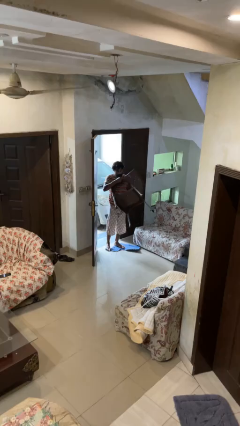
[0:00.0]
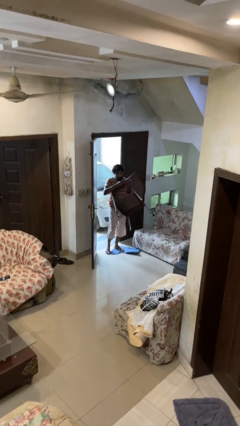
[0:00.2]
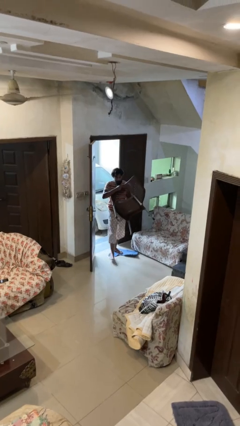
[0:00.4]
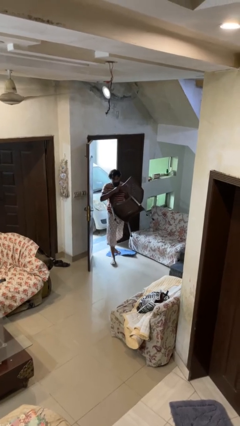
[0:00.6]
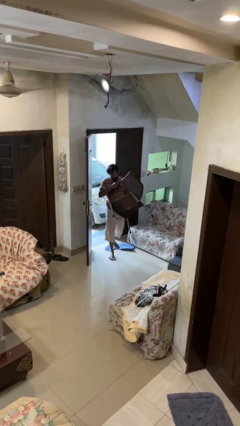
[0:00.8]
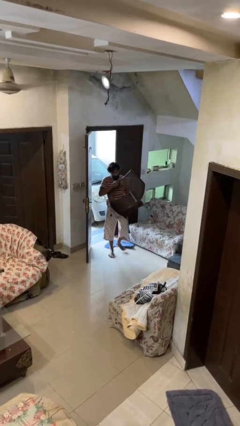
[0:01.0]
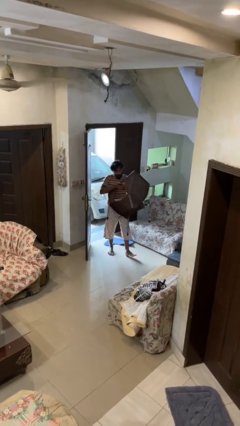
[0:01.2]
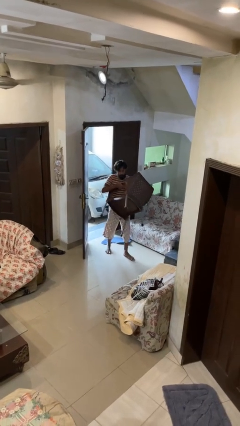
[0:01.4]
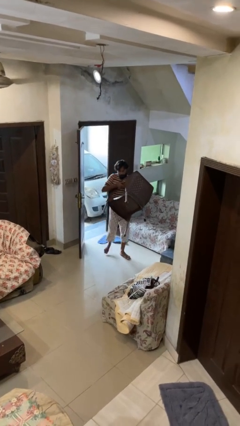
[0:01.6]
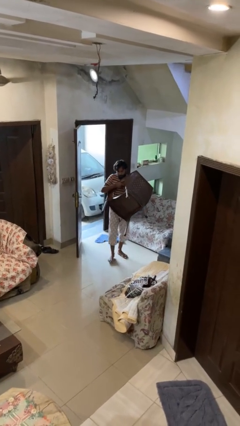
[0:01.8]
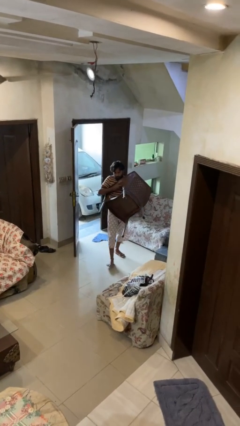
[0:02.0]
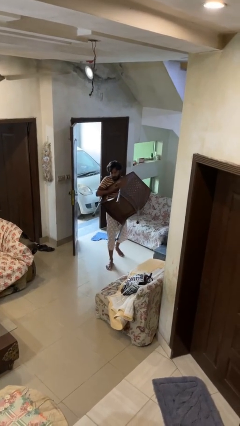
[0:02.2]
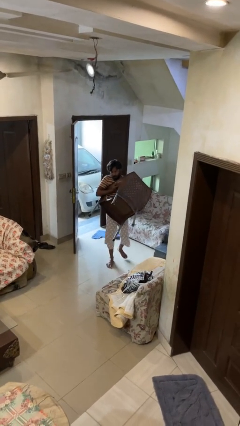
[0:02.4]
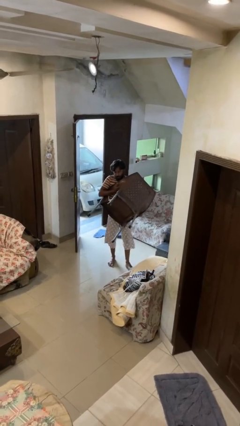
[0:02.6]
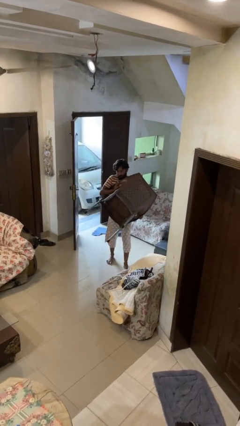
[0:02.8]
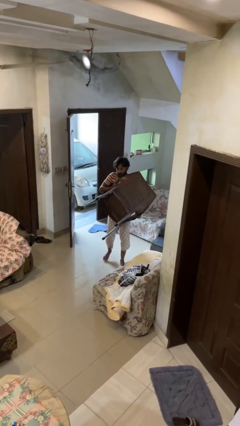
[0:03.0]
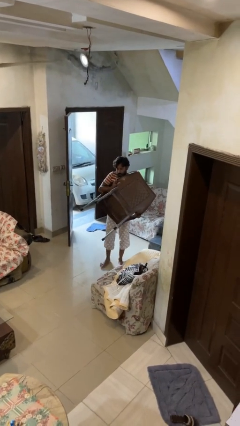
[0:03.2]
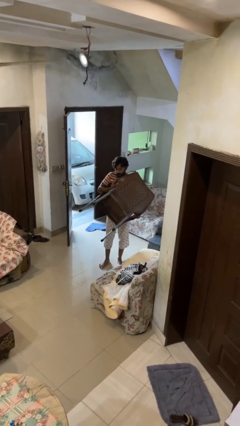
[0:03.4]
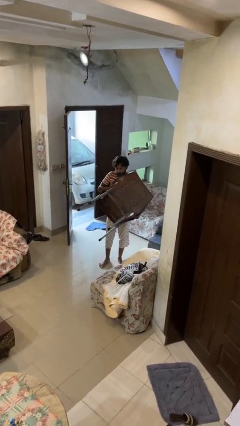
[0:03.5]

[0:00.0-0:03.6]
person carries furniture

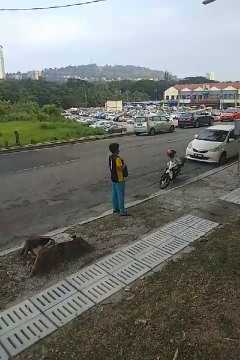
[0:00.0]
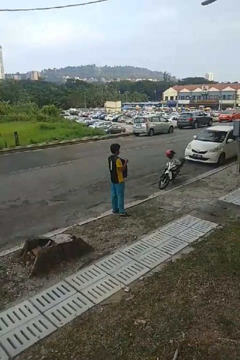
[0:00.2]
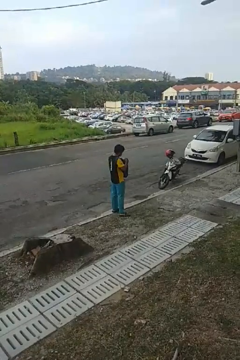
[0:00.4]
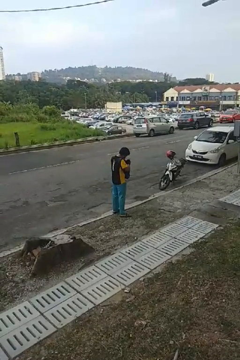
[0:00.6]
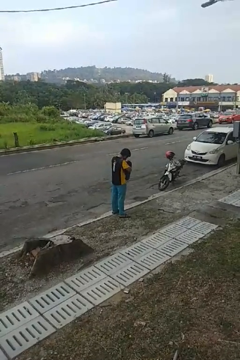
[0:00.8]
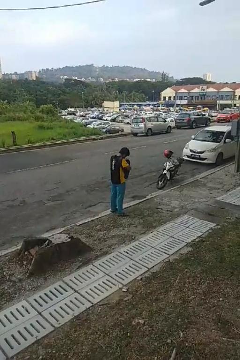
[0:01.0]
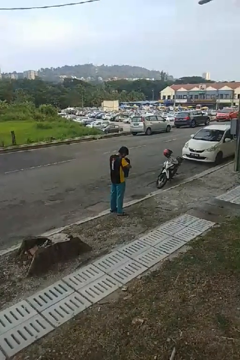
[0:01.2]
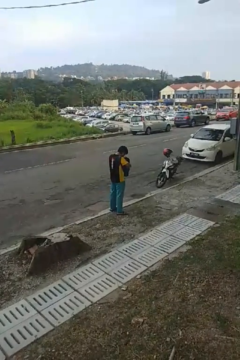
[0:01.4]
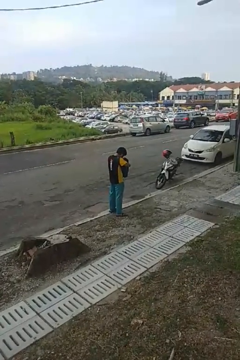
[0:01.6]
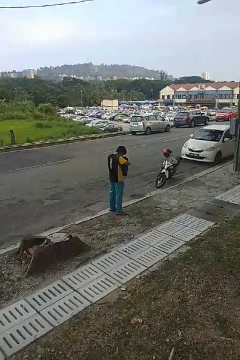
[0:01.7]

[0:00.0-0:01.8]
person searches in backpack

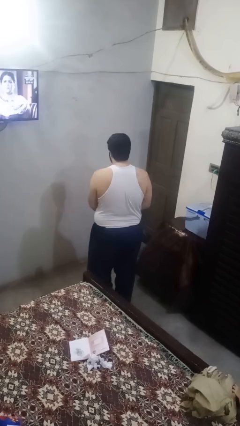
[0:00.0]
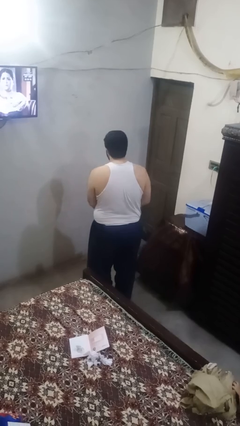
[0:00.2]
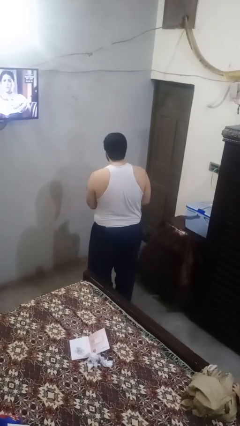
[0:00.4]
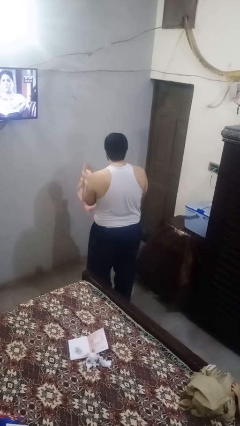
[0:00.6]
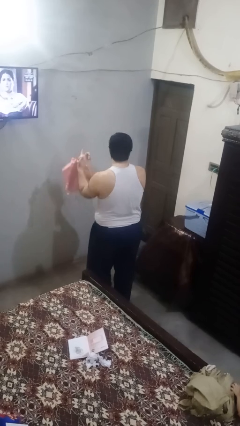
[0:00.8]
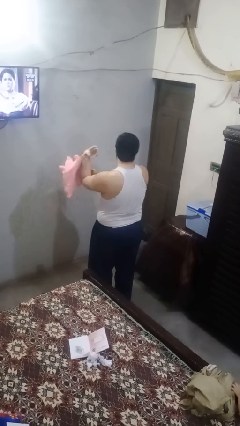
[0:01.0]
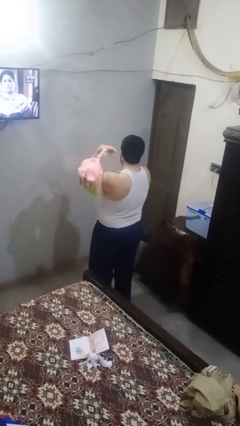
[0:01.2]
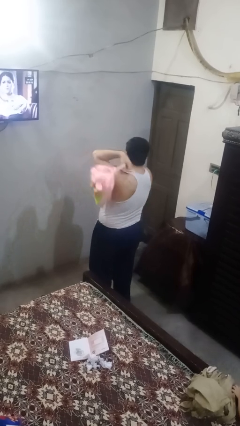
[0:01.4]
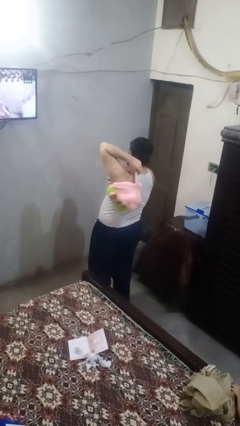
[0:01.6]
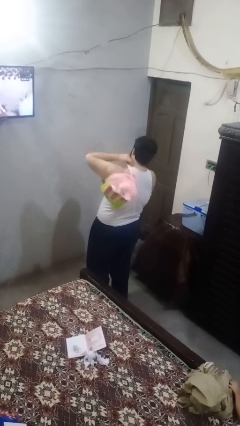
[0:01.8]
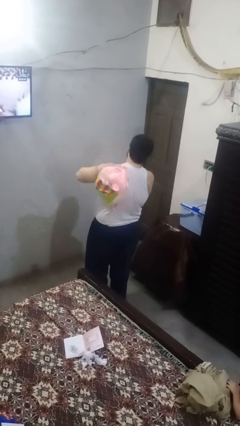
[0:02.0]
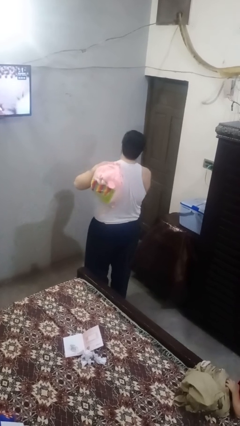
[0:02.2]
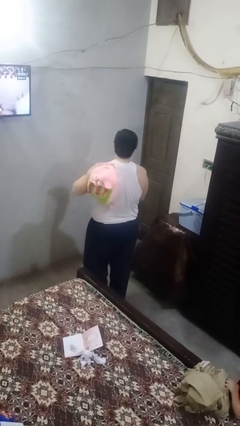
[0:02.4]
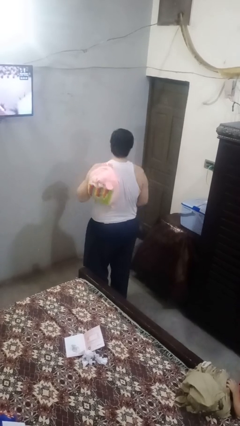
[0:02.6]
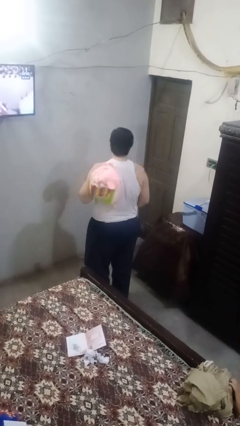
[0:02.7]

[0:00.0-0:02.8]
person puts on backpack

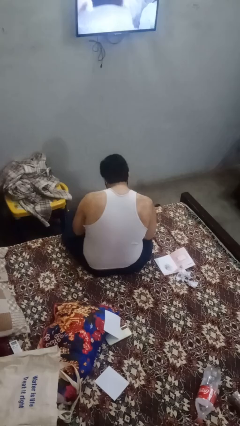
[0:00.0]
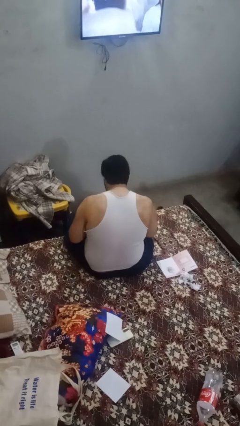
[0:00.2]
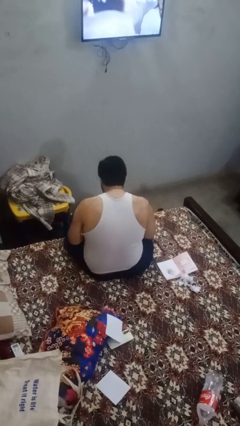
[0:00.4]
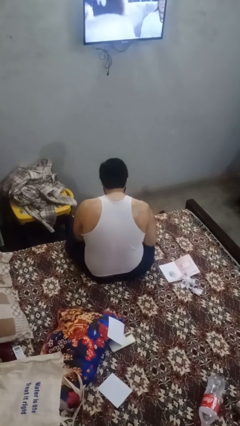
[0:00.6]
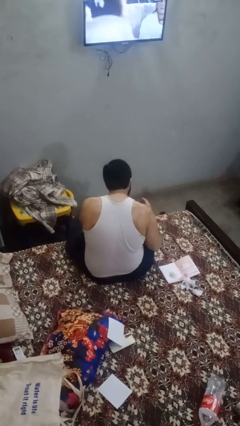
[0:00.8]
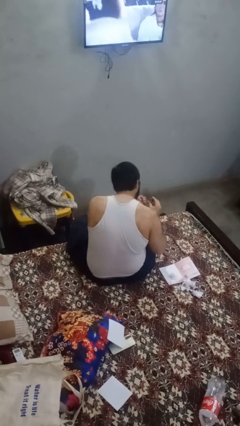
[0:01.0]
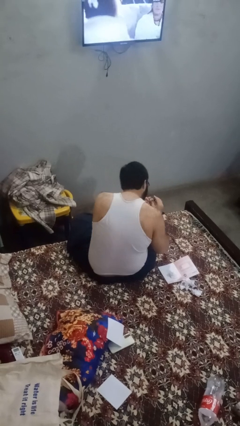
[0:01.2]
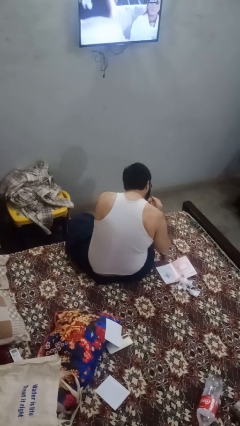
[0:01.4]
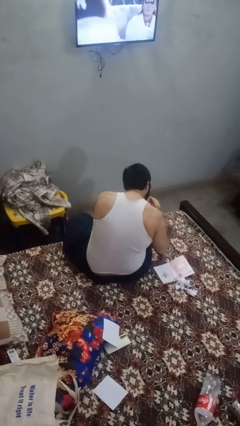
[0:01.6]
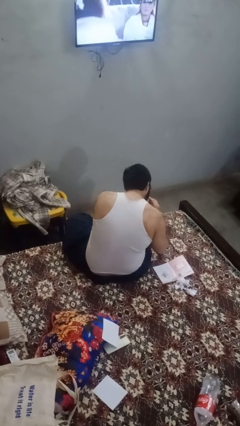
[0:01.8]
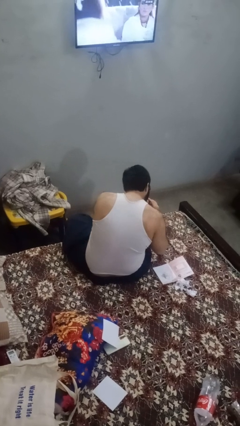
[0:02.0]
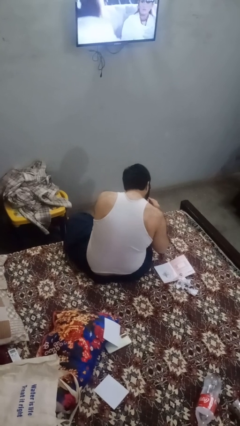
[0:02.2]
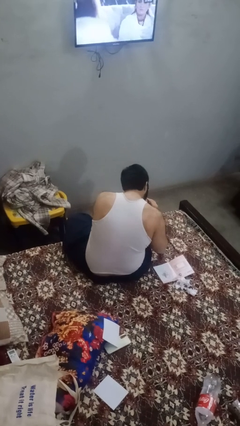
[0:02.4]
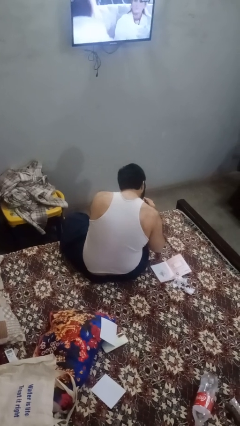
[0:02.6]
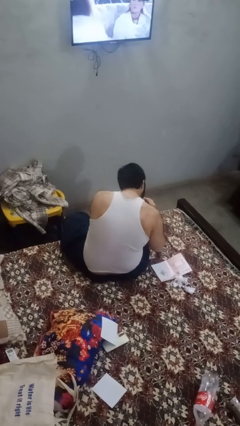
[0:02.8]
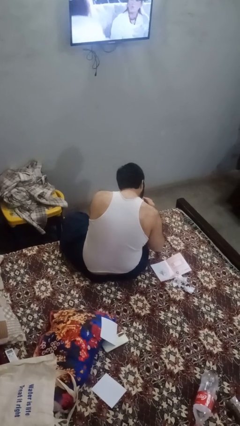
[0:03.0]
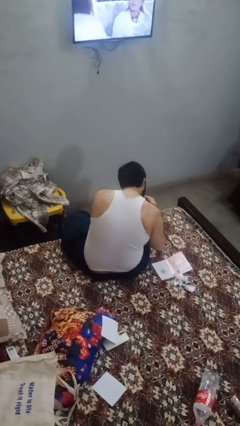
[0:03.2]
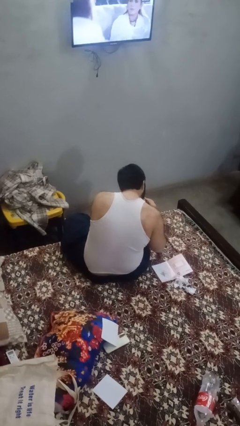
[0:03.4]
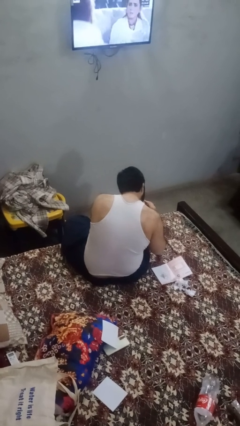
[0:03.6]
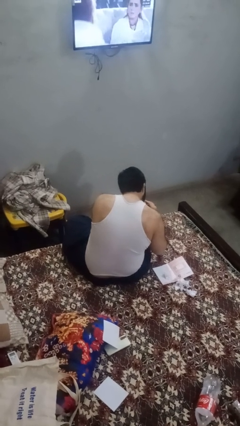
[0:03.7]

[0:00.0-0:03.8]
person clips fingernails

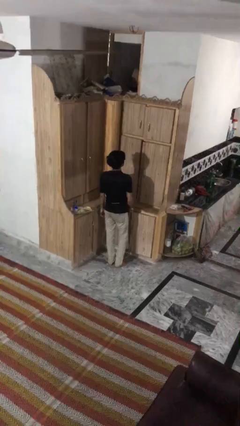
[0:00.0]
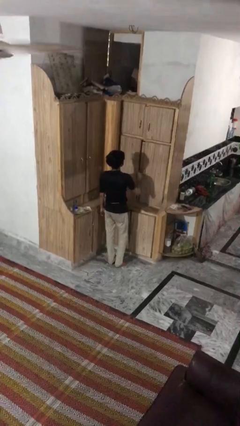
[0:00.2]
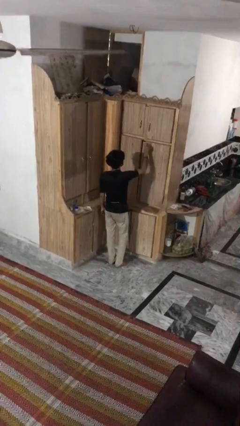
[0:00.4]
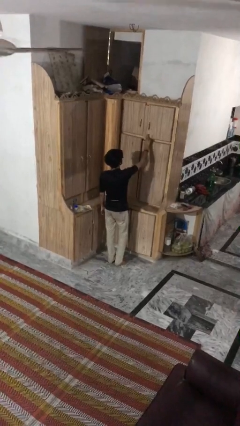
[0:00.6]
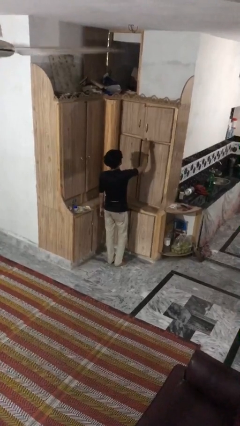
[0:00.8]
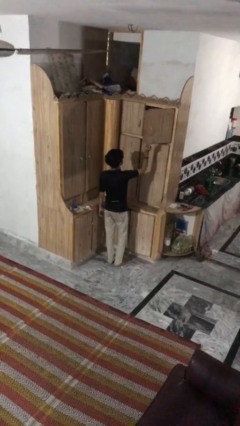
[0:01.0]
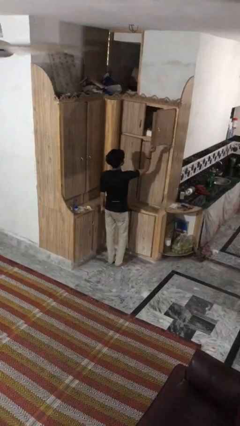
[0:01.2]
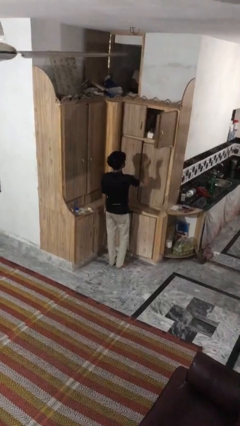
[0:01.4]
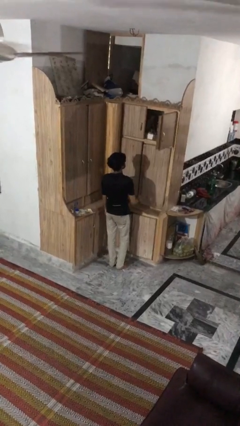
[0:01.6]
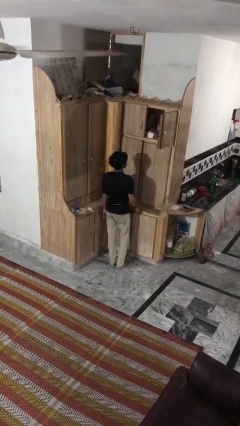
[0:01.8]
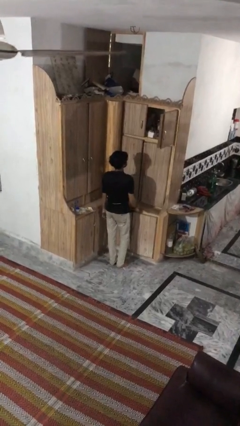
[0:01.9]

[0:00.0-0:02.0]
person opens cabinet

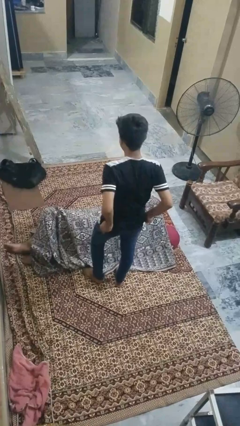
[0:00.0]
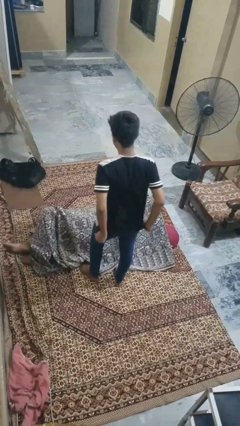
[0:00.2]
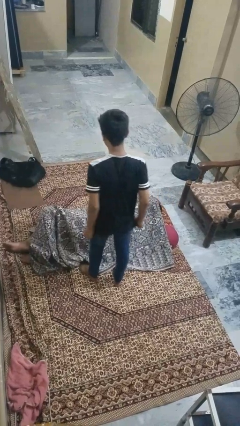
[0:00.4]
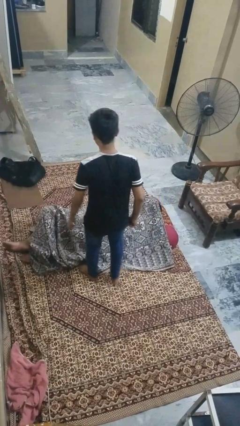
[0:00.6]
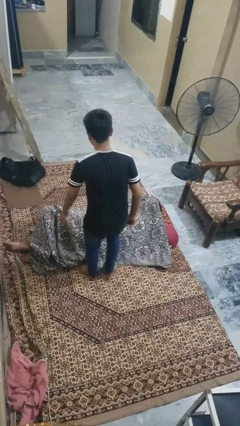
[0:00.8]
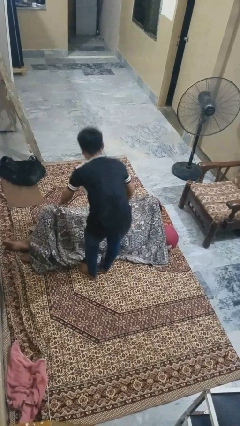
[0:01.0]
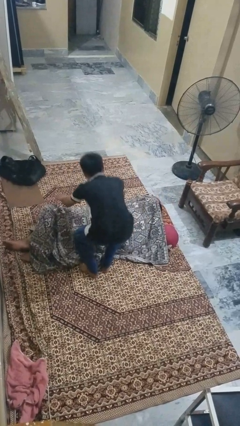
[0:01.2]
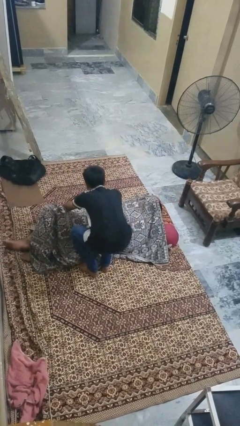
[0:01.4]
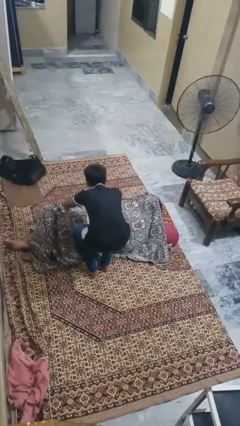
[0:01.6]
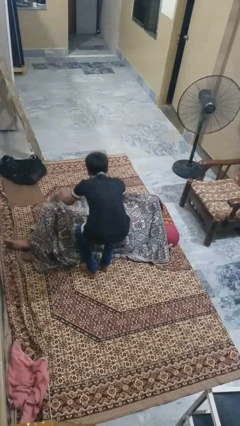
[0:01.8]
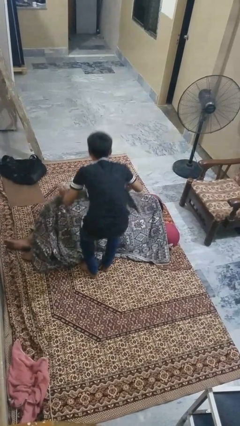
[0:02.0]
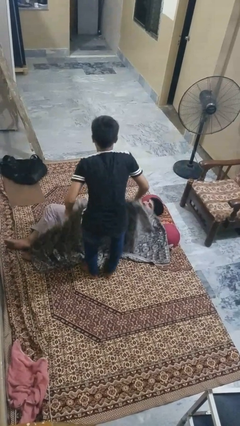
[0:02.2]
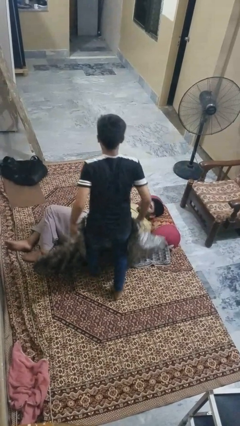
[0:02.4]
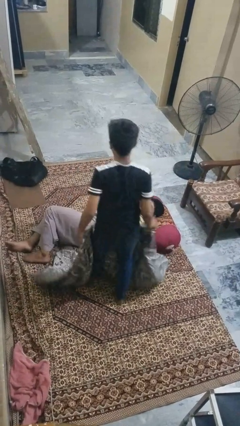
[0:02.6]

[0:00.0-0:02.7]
person uncovers friend with blanket

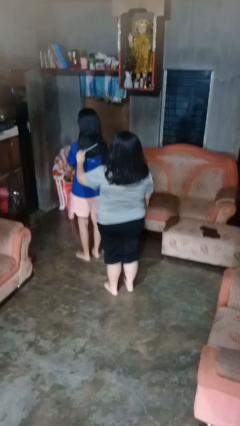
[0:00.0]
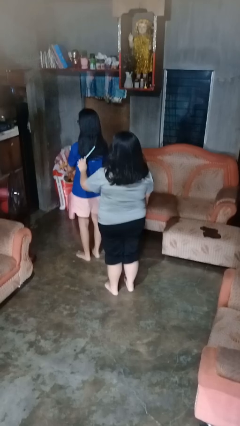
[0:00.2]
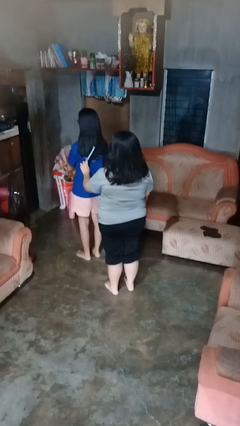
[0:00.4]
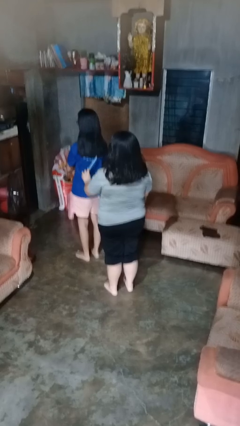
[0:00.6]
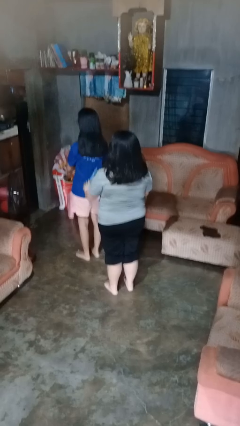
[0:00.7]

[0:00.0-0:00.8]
person brushes hair of person
